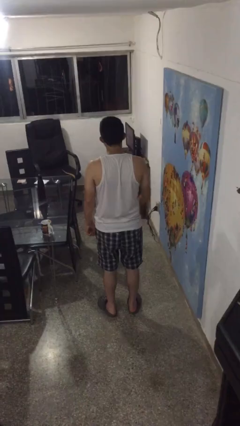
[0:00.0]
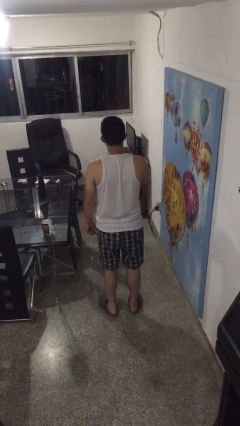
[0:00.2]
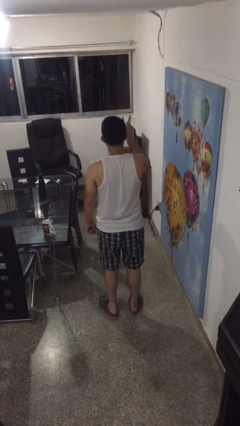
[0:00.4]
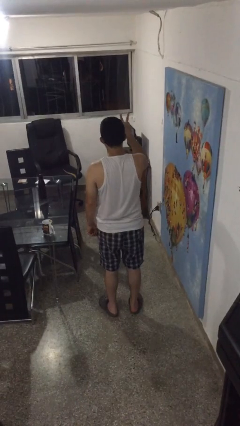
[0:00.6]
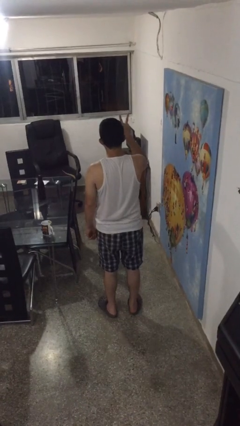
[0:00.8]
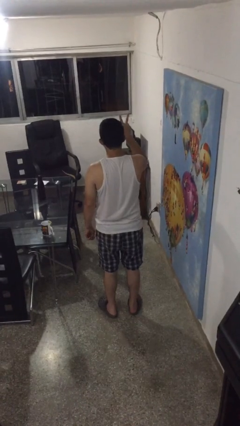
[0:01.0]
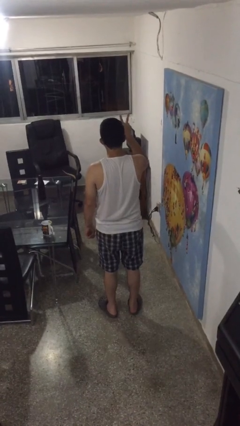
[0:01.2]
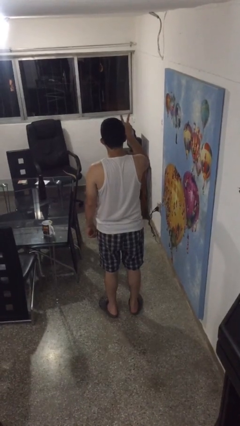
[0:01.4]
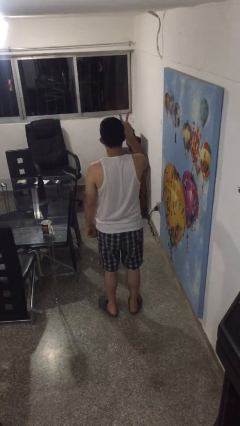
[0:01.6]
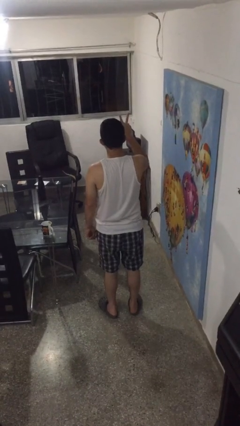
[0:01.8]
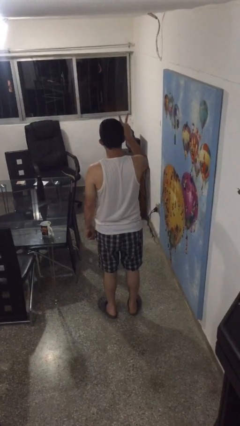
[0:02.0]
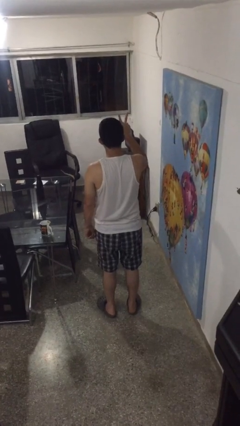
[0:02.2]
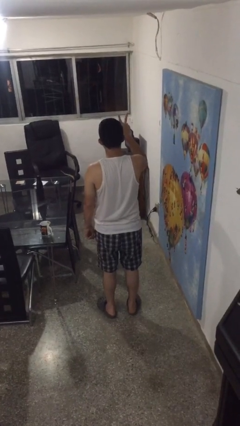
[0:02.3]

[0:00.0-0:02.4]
person gestures peace

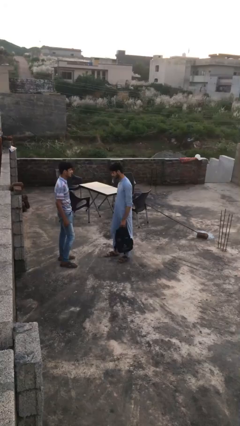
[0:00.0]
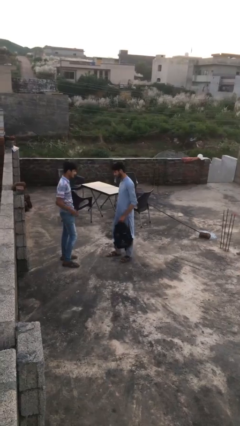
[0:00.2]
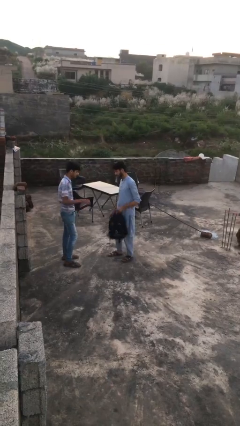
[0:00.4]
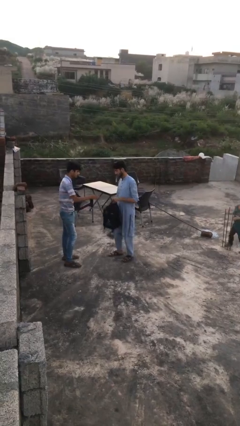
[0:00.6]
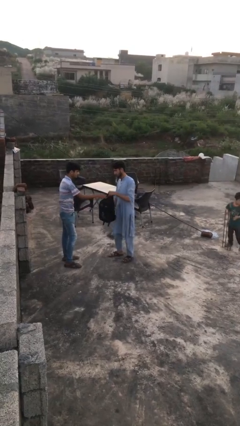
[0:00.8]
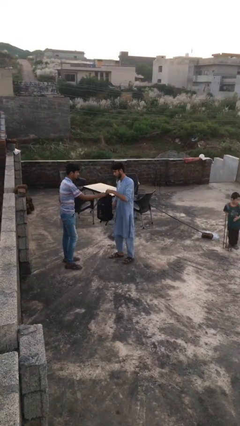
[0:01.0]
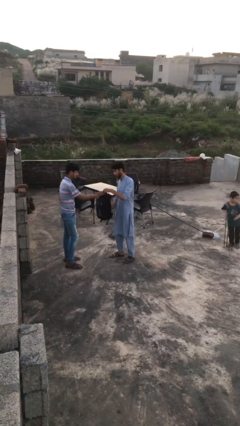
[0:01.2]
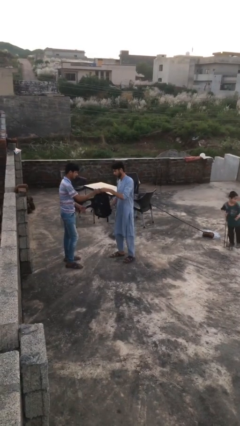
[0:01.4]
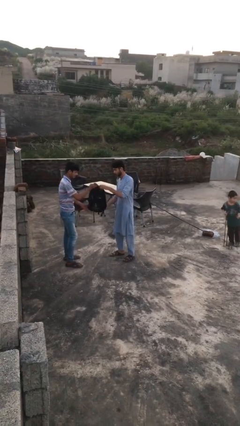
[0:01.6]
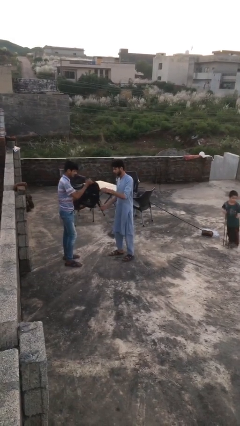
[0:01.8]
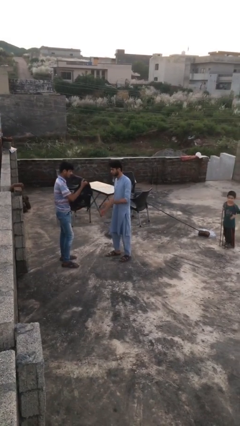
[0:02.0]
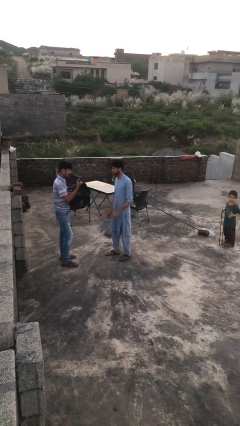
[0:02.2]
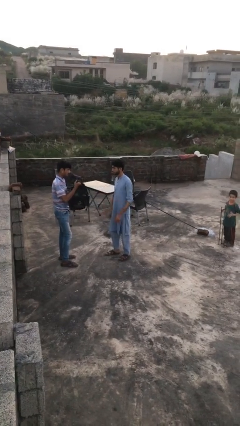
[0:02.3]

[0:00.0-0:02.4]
person transfers object to person

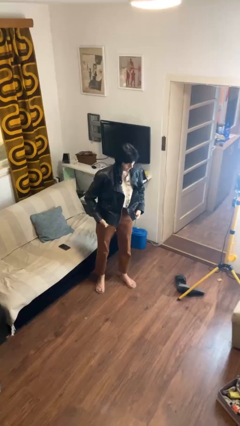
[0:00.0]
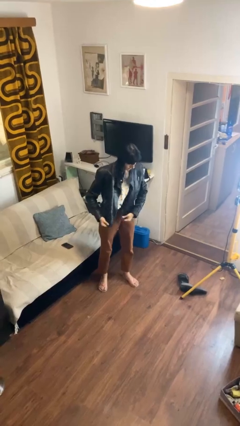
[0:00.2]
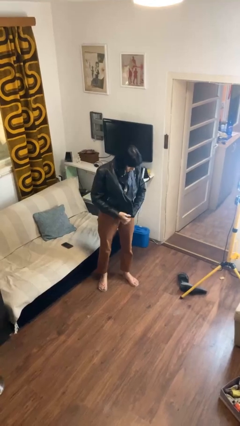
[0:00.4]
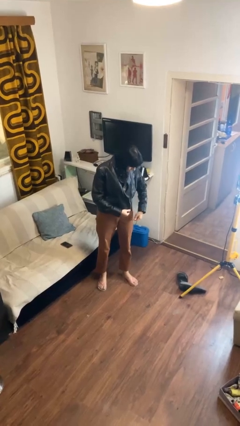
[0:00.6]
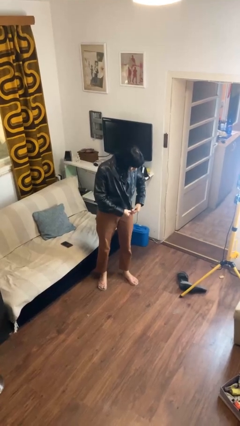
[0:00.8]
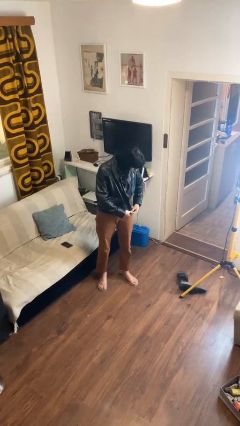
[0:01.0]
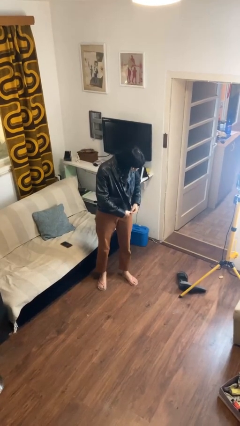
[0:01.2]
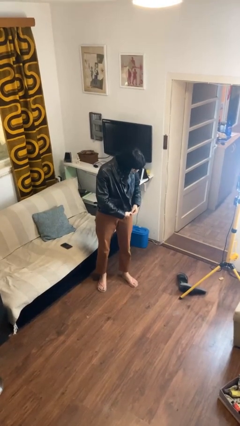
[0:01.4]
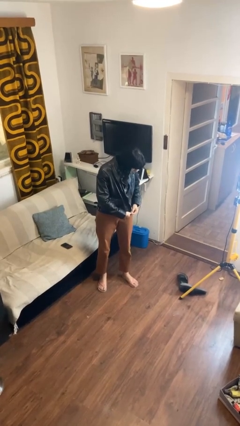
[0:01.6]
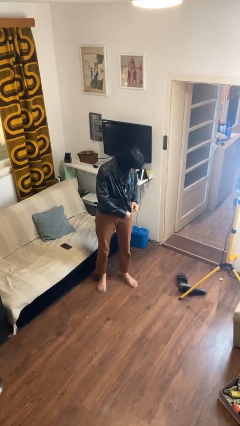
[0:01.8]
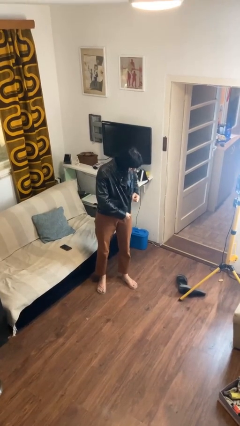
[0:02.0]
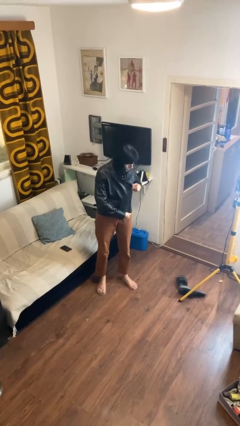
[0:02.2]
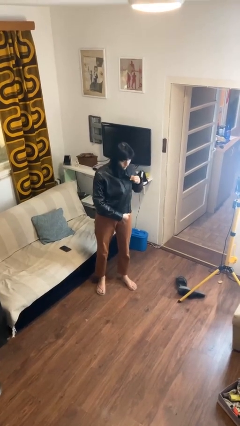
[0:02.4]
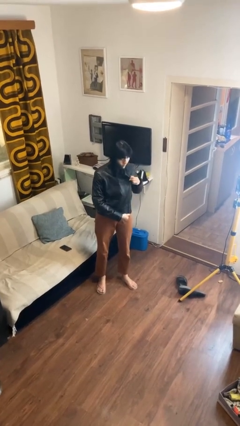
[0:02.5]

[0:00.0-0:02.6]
person zips up jacket

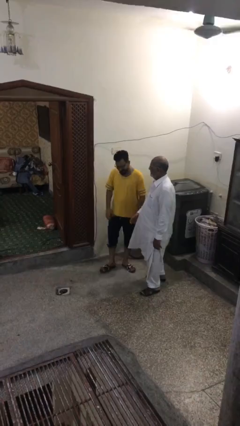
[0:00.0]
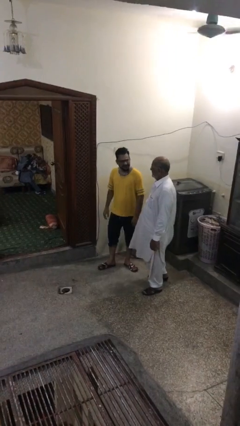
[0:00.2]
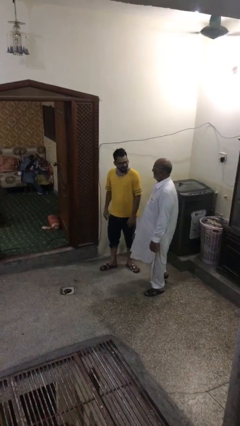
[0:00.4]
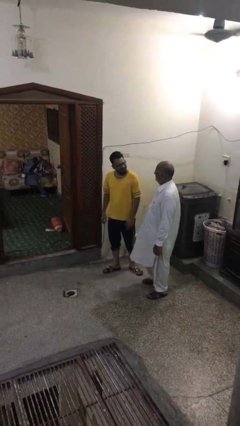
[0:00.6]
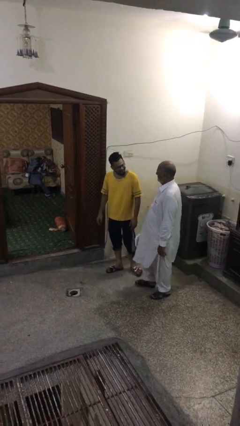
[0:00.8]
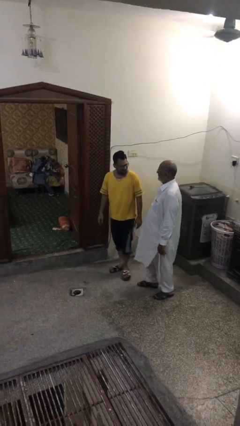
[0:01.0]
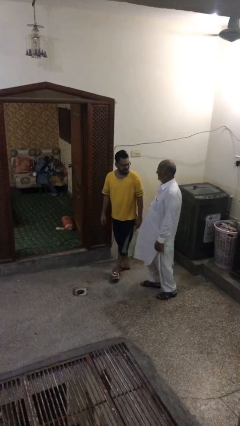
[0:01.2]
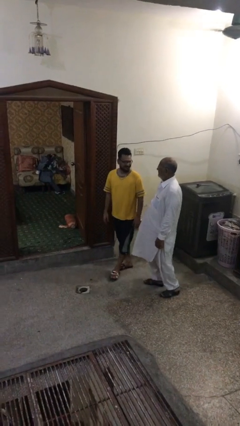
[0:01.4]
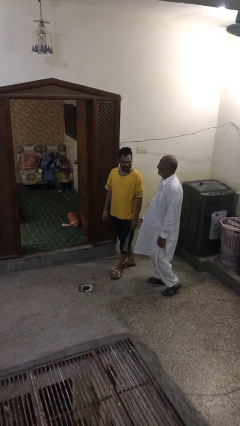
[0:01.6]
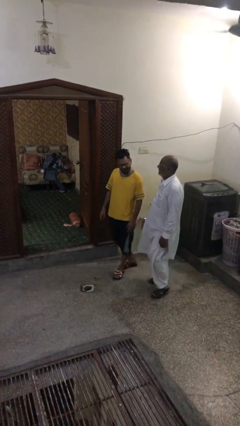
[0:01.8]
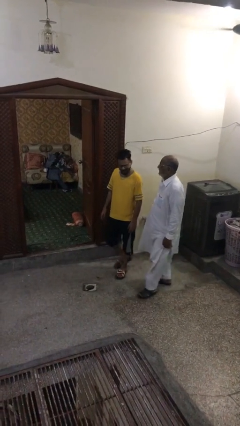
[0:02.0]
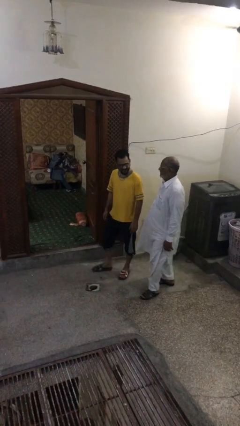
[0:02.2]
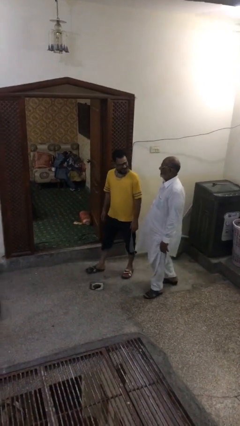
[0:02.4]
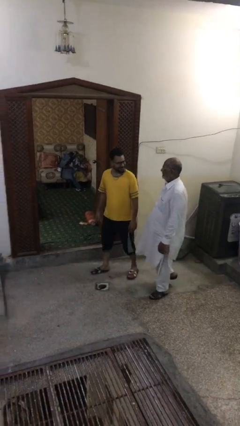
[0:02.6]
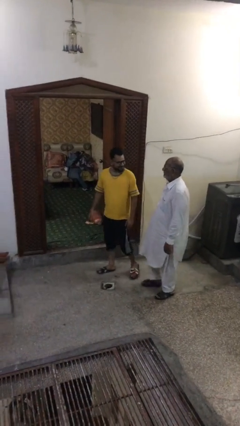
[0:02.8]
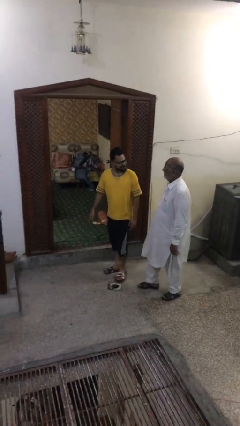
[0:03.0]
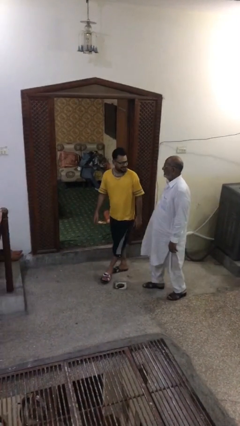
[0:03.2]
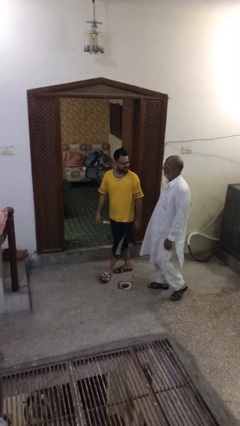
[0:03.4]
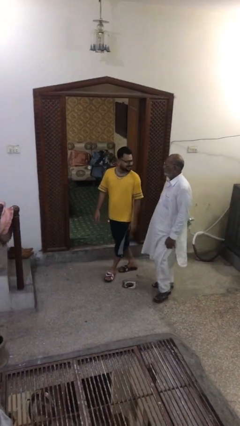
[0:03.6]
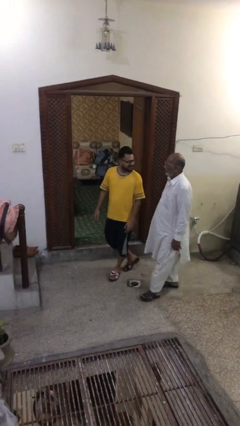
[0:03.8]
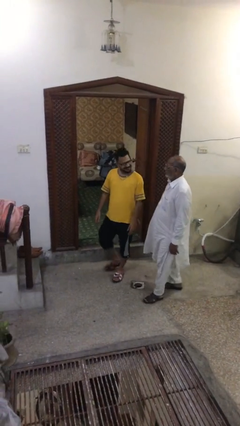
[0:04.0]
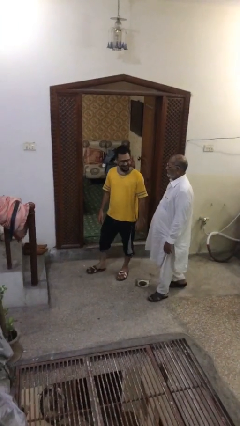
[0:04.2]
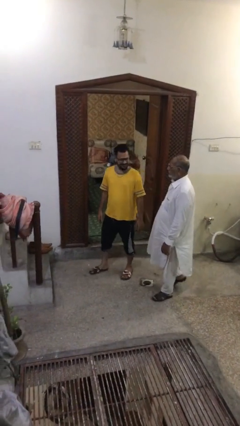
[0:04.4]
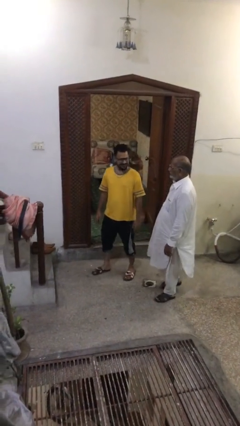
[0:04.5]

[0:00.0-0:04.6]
person talks to person

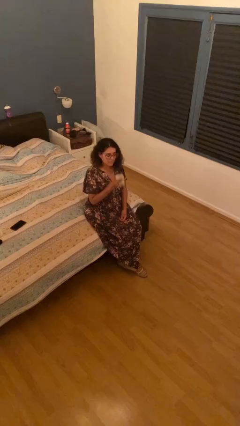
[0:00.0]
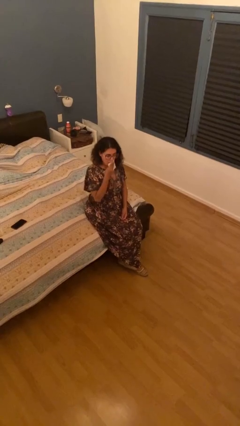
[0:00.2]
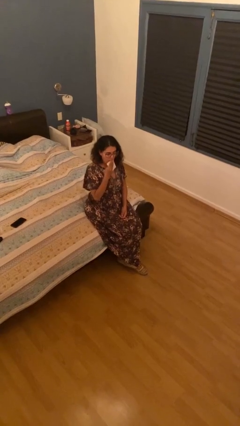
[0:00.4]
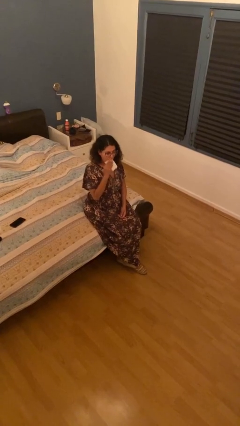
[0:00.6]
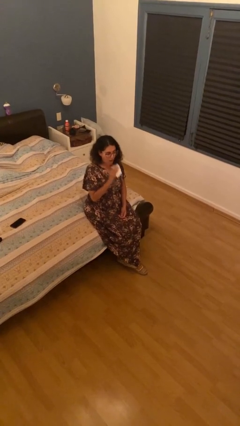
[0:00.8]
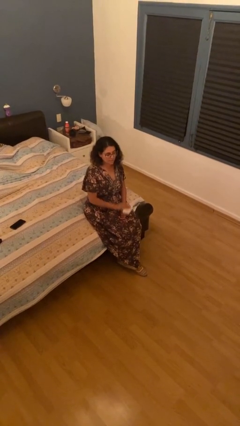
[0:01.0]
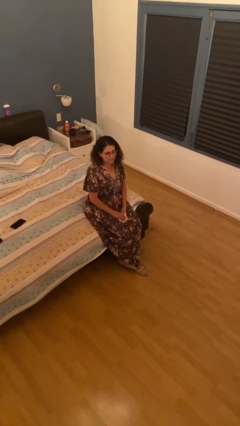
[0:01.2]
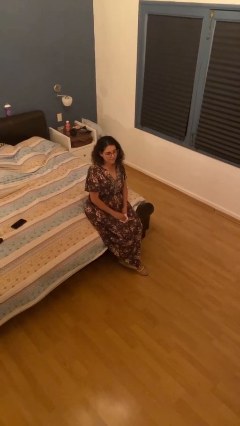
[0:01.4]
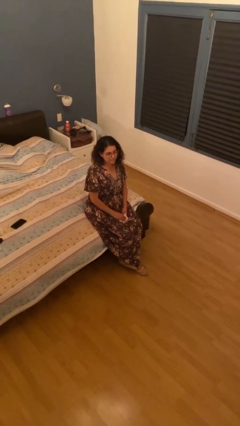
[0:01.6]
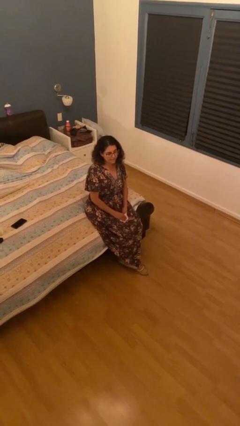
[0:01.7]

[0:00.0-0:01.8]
person wipes mouth with napkin

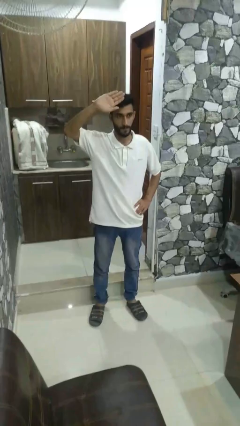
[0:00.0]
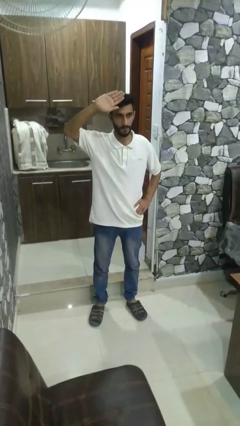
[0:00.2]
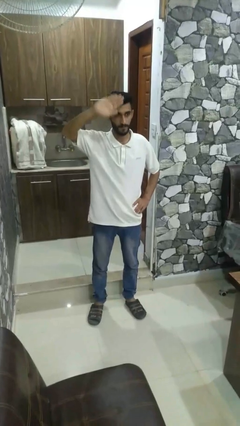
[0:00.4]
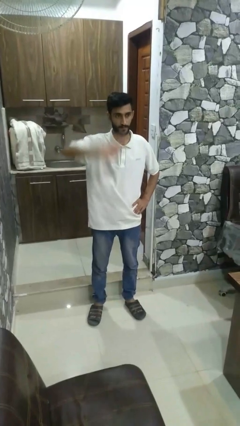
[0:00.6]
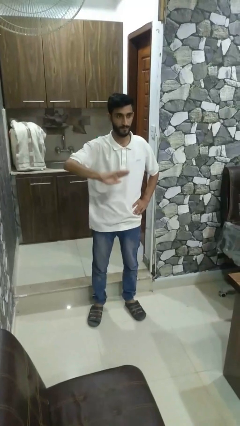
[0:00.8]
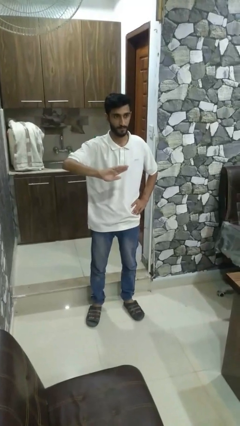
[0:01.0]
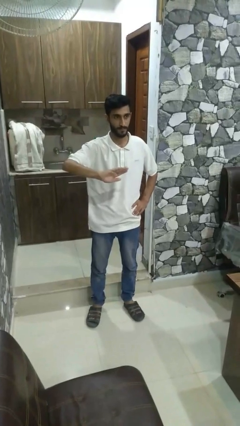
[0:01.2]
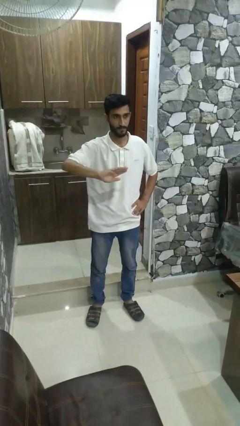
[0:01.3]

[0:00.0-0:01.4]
person gestures swipe down

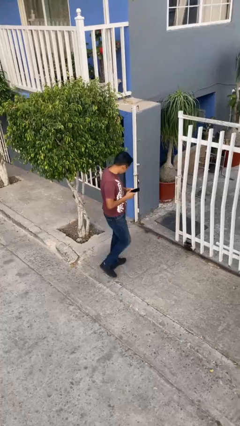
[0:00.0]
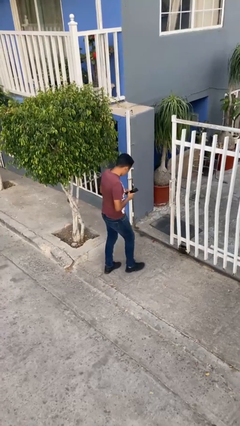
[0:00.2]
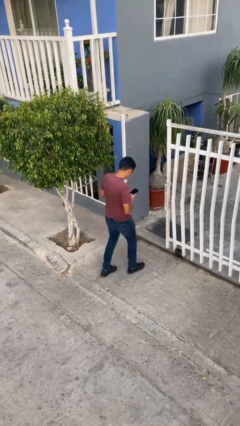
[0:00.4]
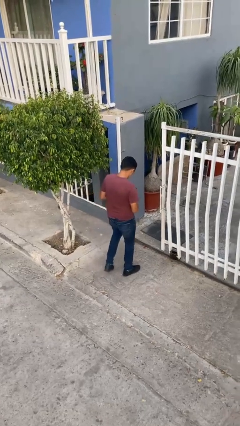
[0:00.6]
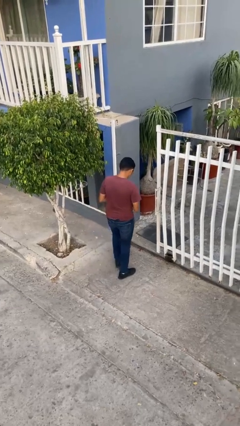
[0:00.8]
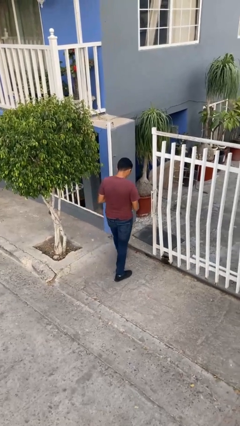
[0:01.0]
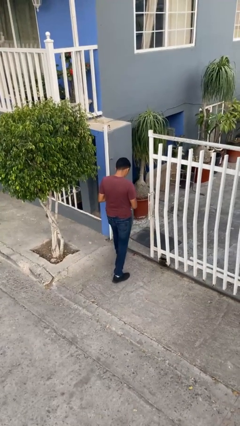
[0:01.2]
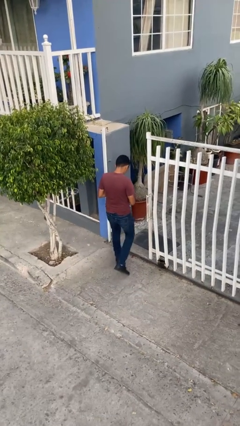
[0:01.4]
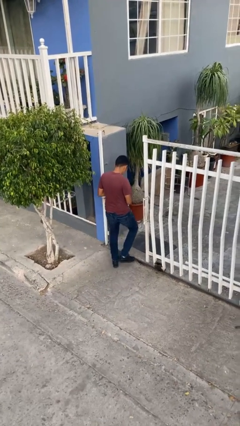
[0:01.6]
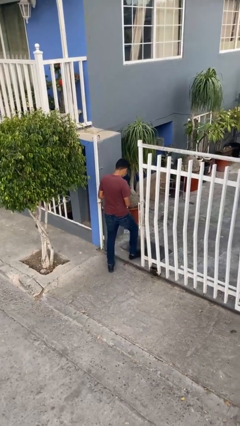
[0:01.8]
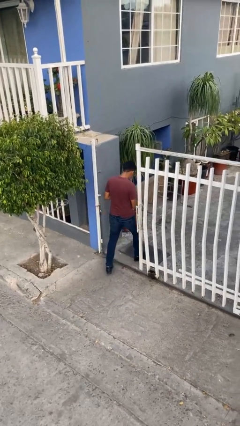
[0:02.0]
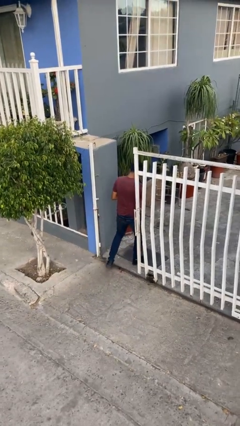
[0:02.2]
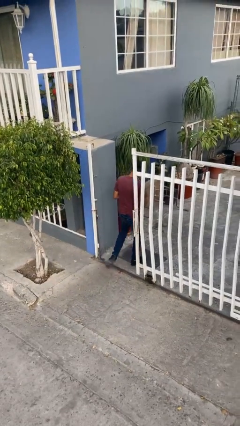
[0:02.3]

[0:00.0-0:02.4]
person exits scene through structure
